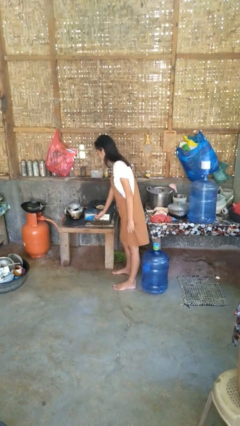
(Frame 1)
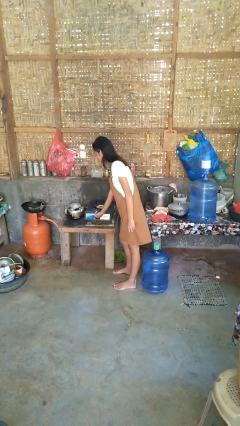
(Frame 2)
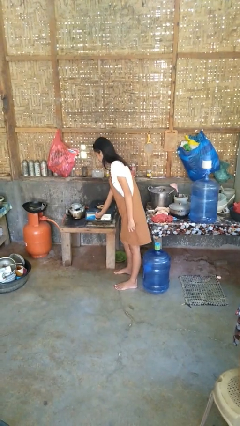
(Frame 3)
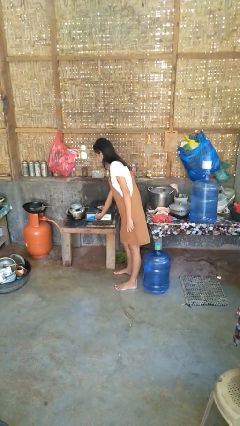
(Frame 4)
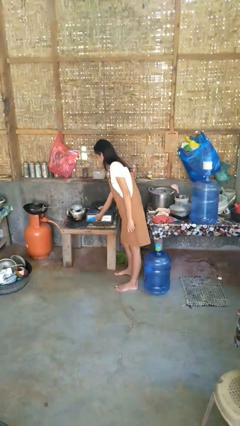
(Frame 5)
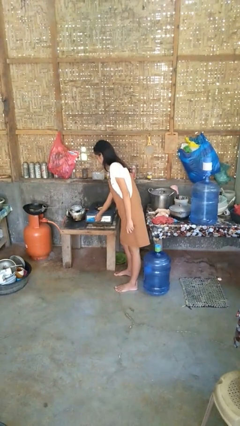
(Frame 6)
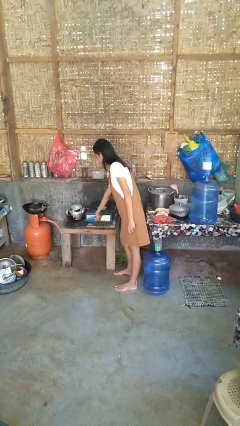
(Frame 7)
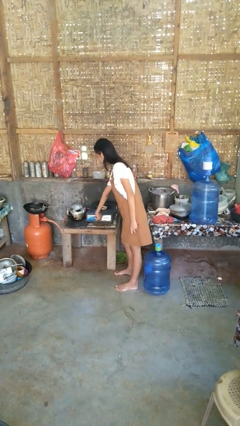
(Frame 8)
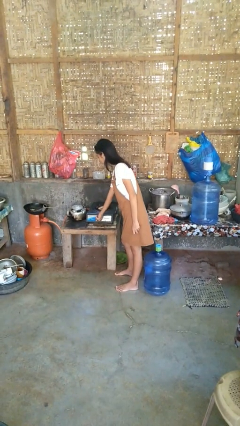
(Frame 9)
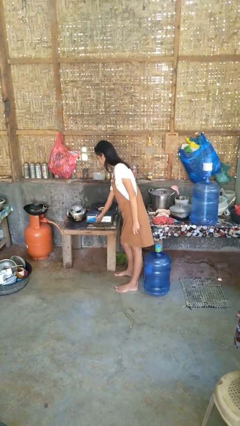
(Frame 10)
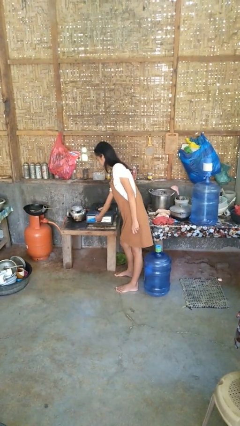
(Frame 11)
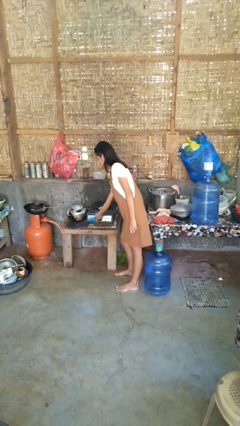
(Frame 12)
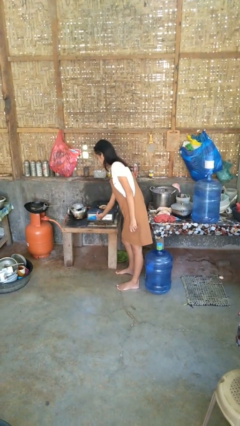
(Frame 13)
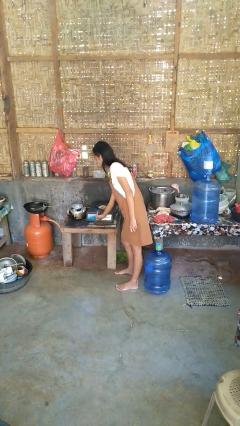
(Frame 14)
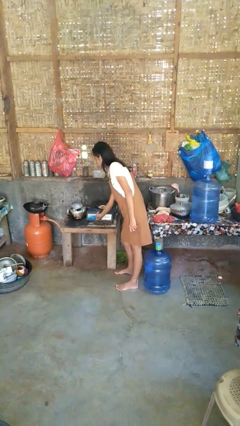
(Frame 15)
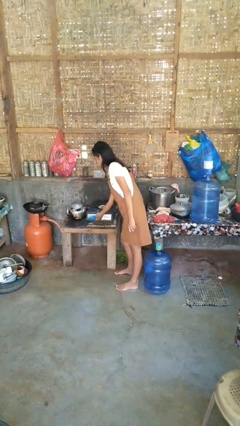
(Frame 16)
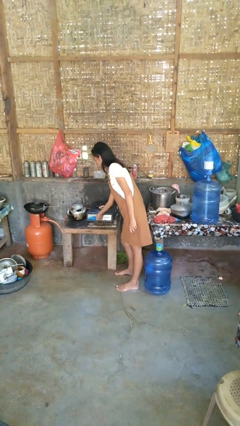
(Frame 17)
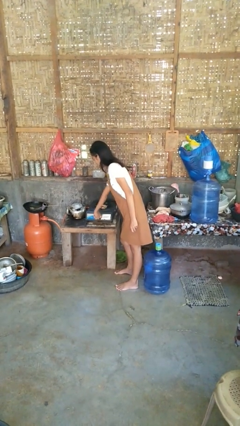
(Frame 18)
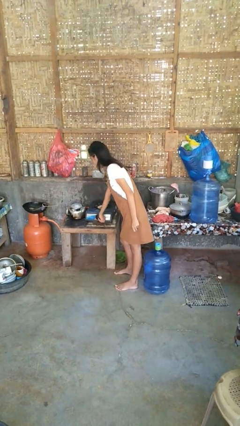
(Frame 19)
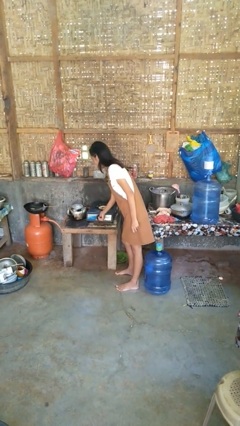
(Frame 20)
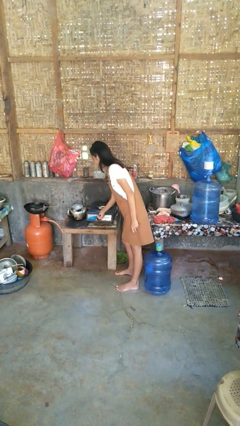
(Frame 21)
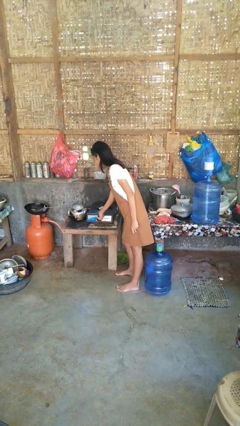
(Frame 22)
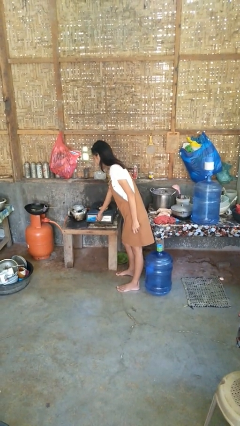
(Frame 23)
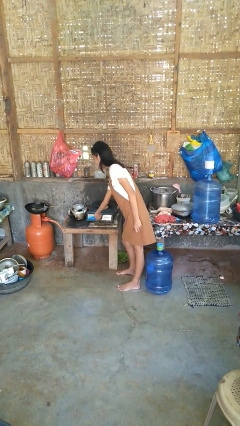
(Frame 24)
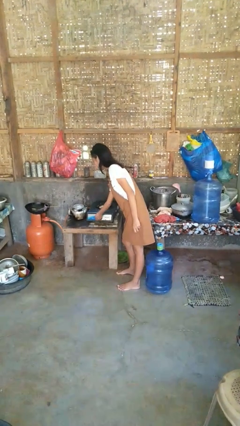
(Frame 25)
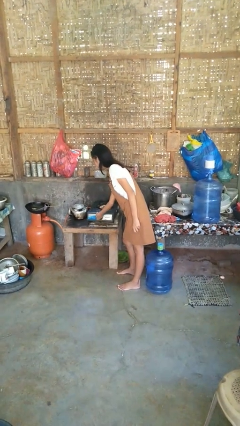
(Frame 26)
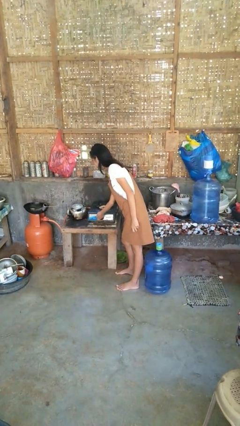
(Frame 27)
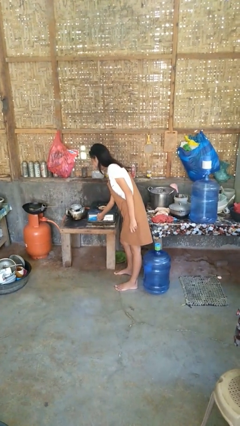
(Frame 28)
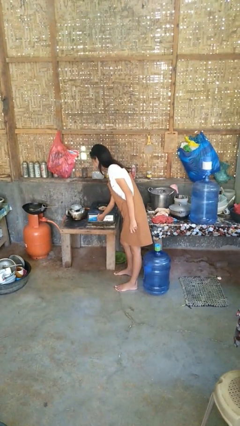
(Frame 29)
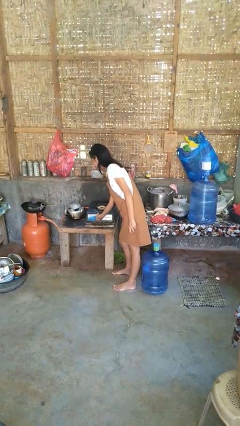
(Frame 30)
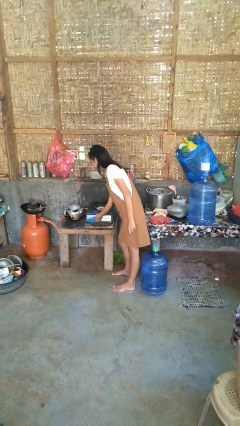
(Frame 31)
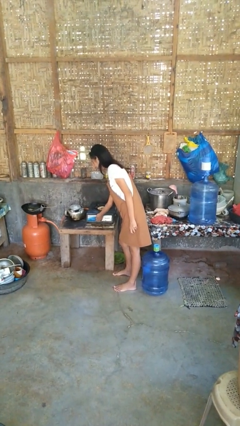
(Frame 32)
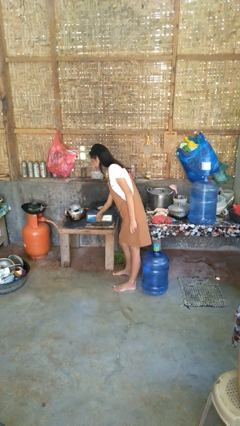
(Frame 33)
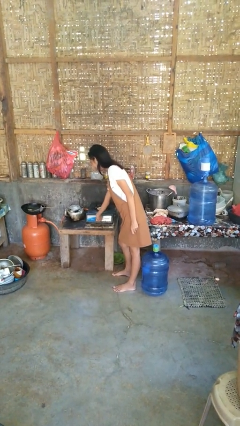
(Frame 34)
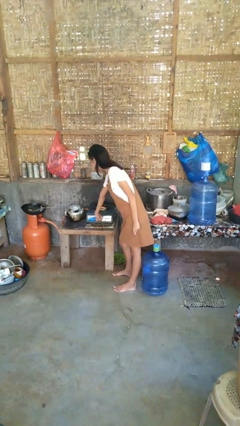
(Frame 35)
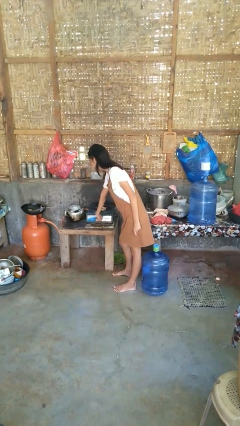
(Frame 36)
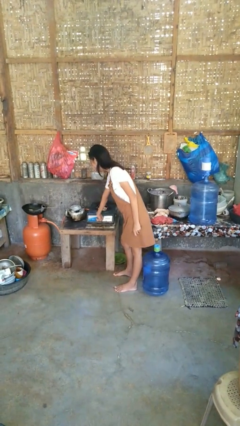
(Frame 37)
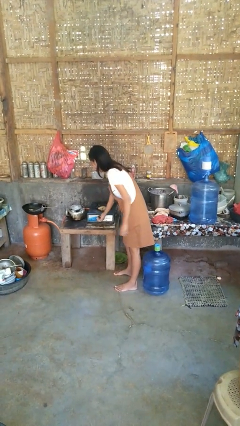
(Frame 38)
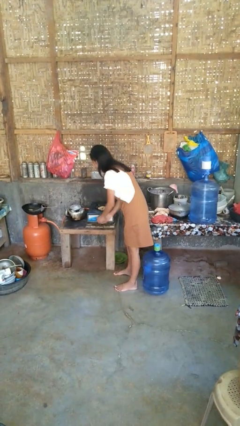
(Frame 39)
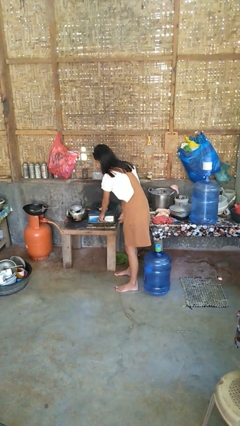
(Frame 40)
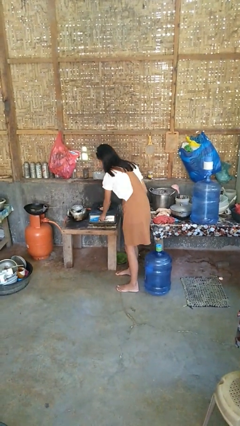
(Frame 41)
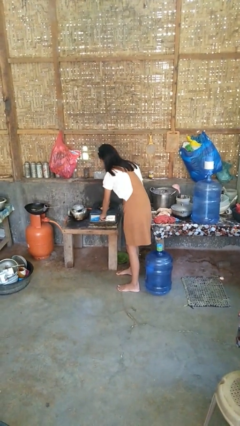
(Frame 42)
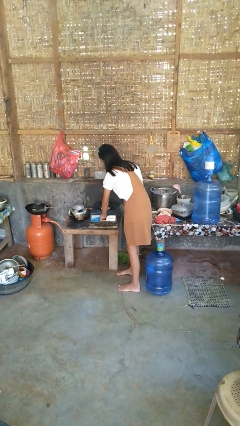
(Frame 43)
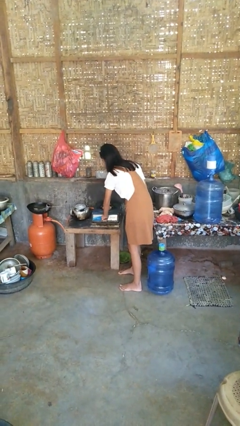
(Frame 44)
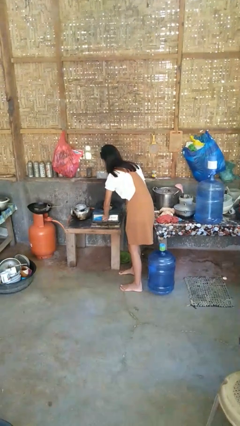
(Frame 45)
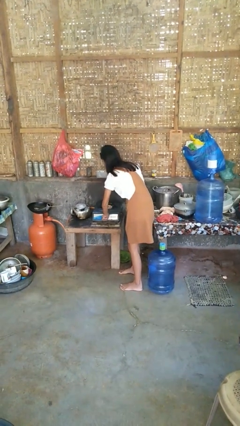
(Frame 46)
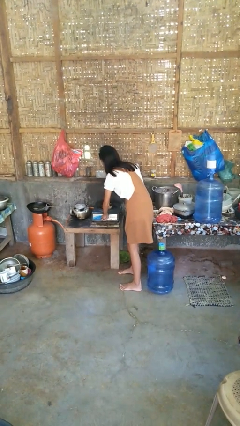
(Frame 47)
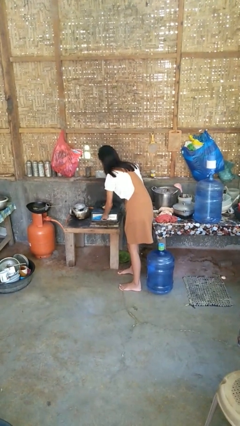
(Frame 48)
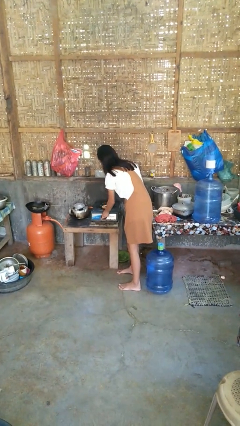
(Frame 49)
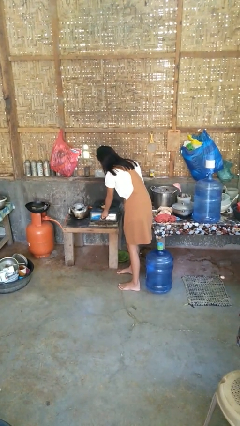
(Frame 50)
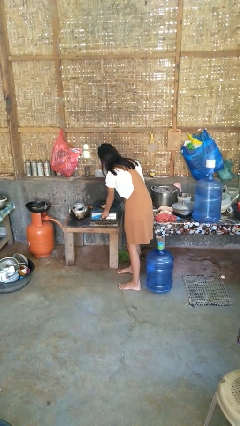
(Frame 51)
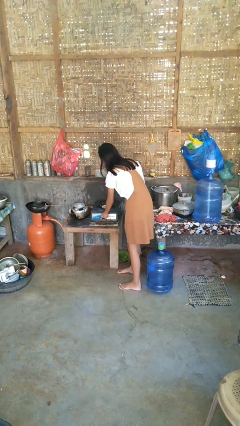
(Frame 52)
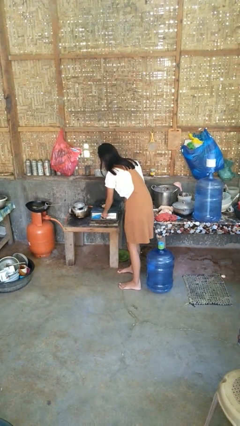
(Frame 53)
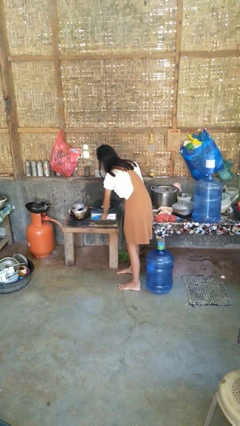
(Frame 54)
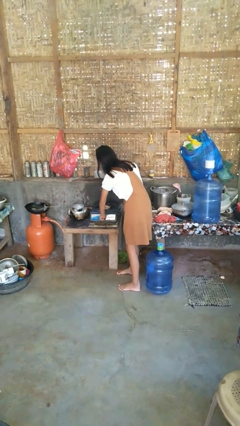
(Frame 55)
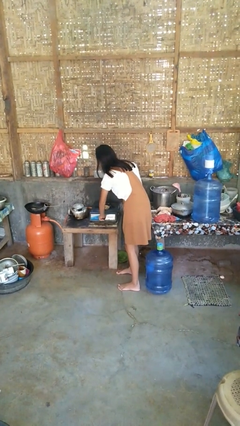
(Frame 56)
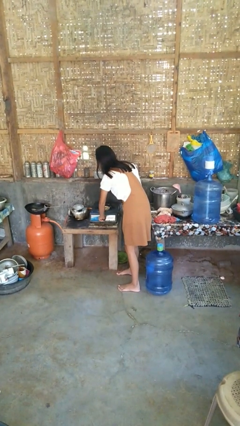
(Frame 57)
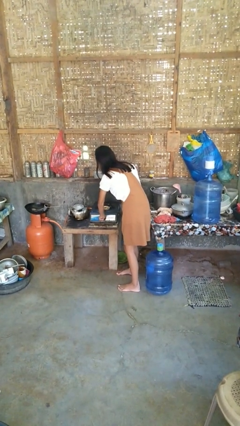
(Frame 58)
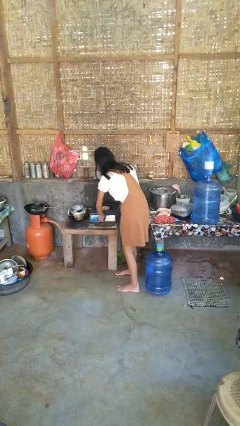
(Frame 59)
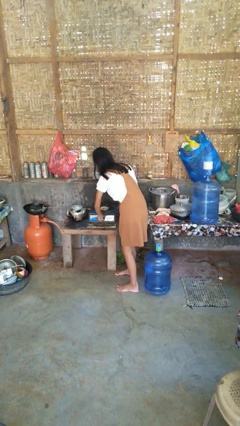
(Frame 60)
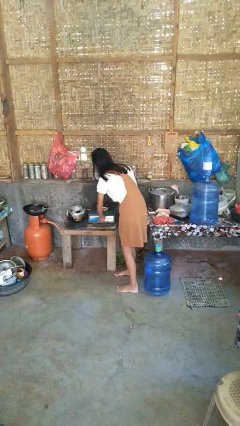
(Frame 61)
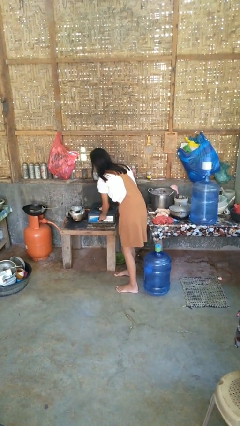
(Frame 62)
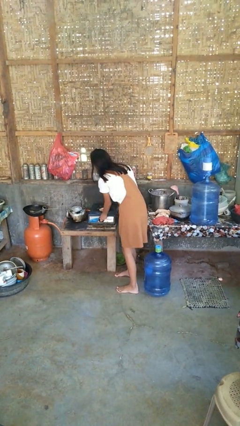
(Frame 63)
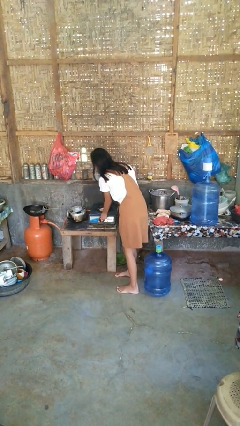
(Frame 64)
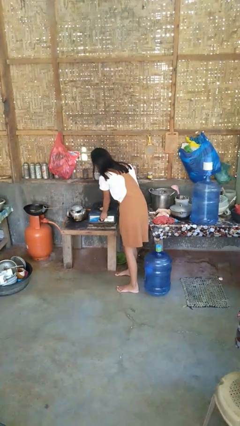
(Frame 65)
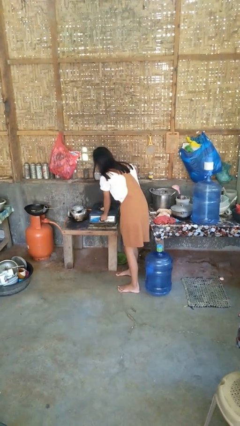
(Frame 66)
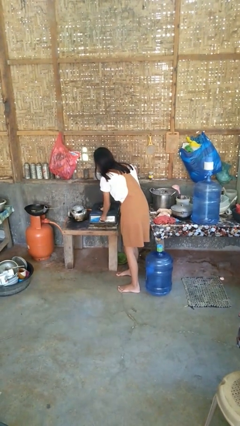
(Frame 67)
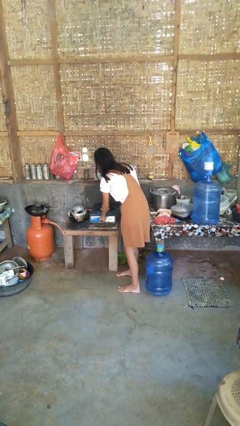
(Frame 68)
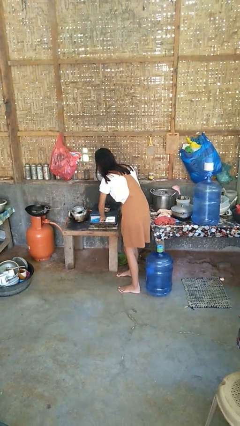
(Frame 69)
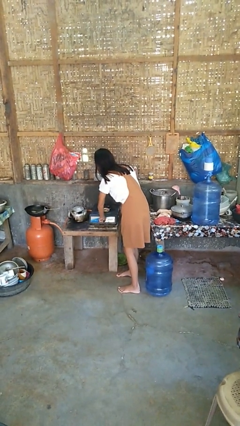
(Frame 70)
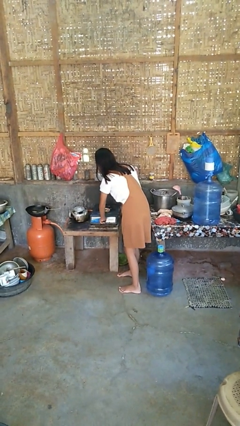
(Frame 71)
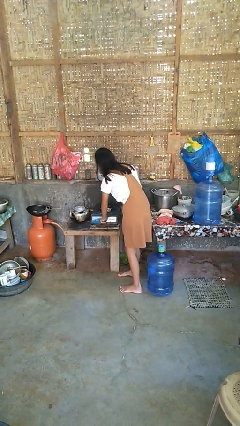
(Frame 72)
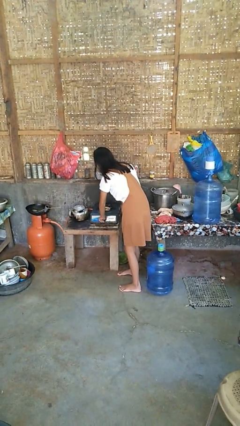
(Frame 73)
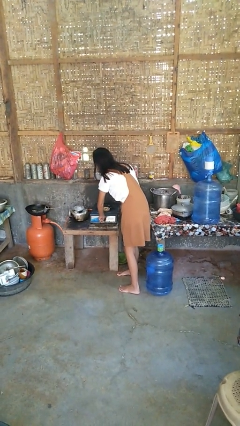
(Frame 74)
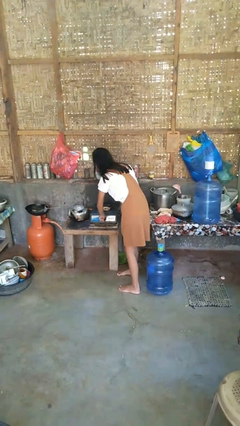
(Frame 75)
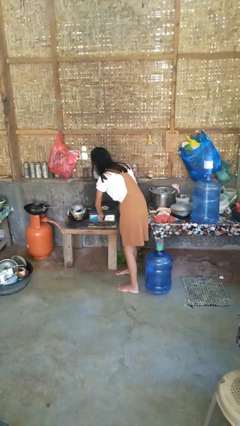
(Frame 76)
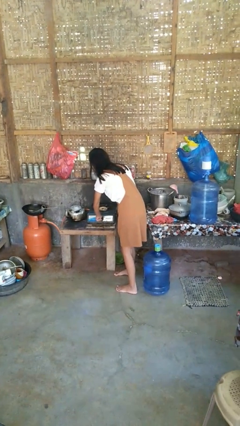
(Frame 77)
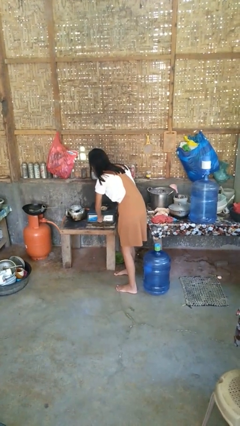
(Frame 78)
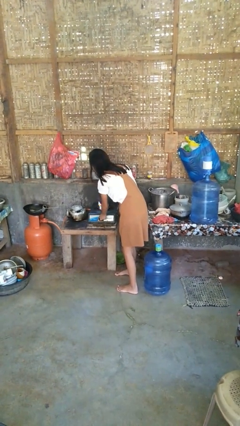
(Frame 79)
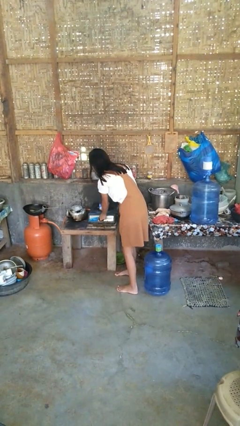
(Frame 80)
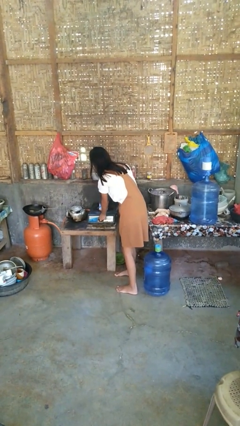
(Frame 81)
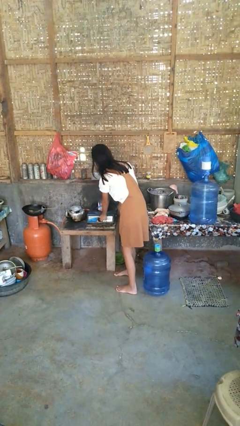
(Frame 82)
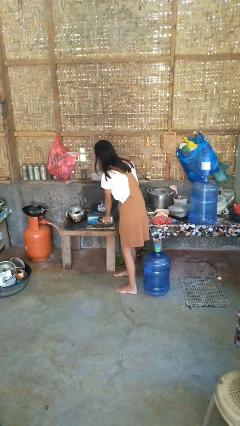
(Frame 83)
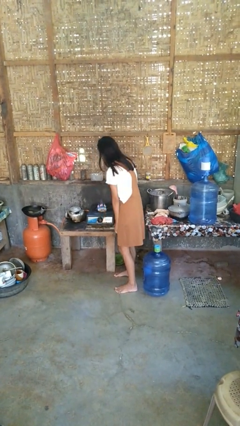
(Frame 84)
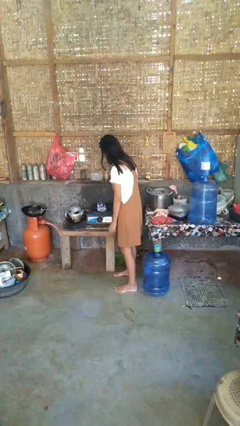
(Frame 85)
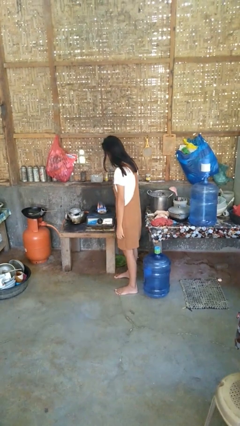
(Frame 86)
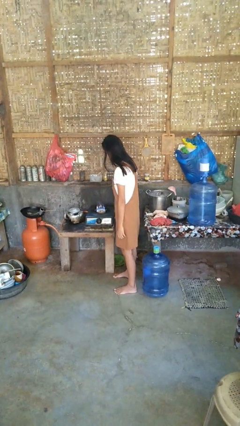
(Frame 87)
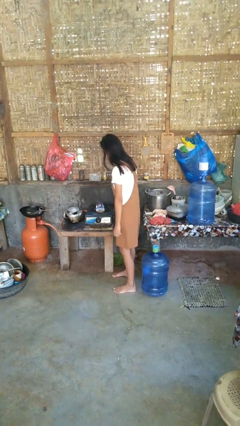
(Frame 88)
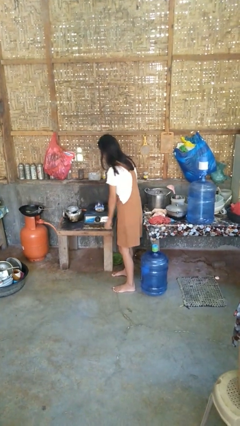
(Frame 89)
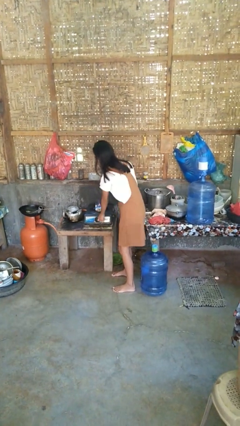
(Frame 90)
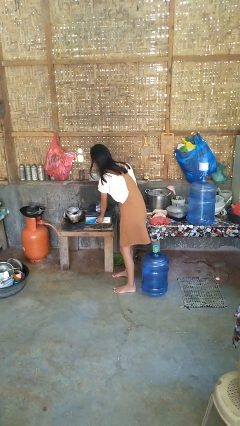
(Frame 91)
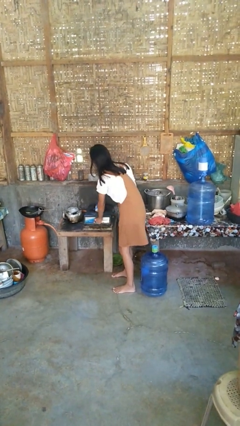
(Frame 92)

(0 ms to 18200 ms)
person turns on stovetop
